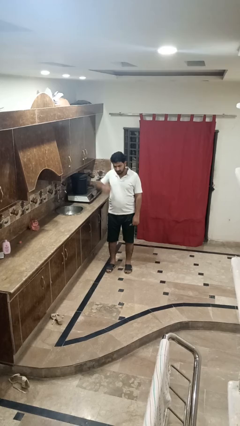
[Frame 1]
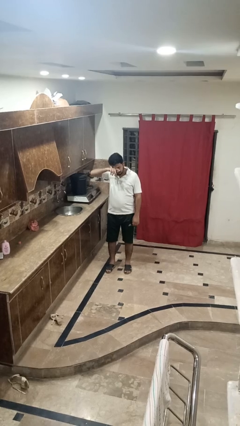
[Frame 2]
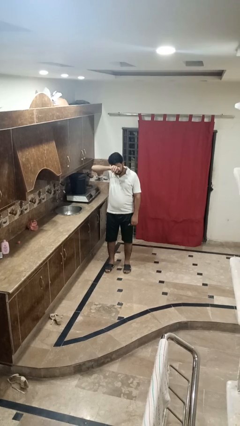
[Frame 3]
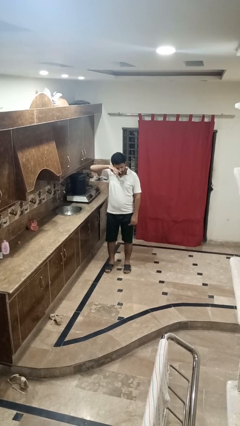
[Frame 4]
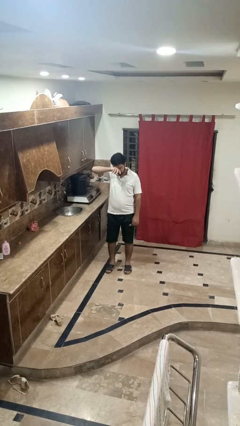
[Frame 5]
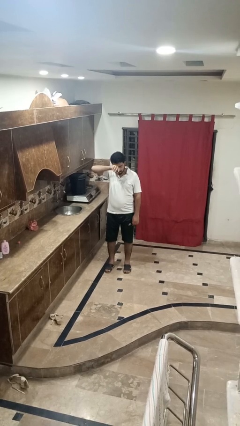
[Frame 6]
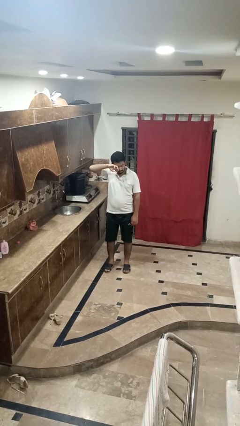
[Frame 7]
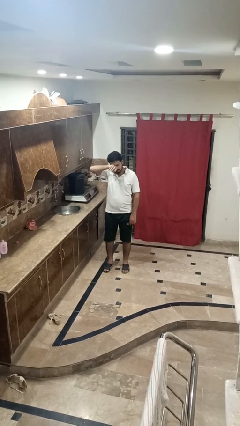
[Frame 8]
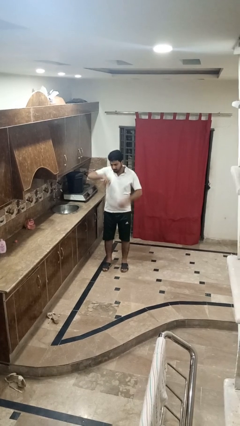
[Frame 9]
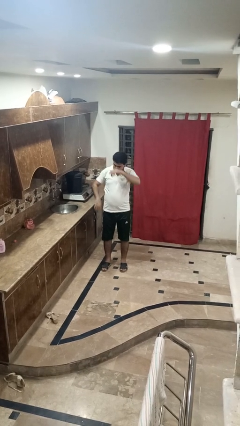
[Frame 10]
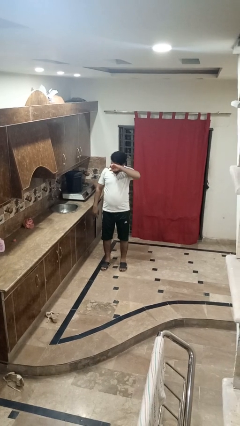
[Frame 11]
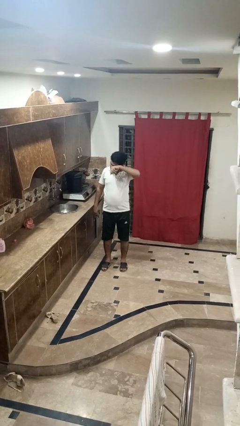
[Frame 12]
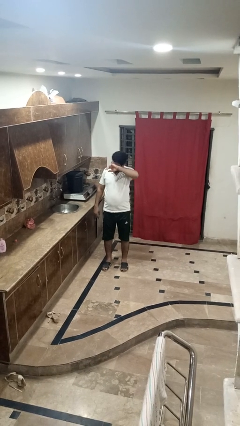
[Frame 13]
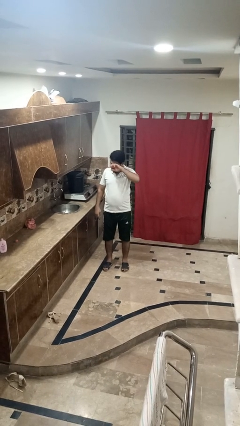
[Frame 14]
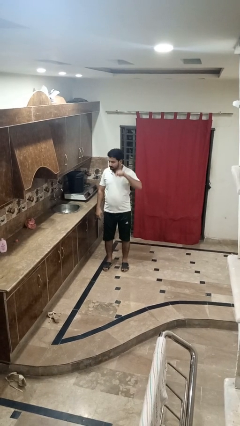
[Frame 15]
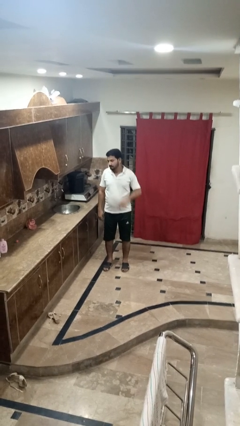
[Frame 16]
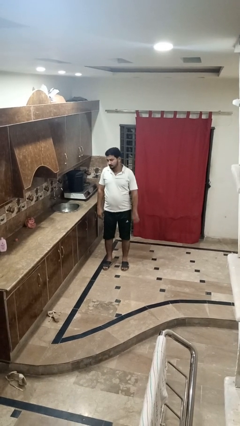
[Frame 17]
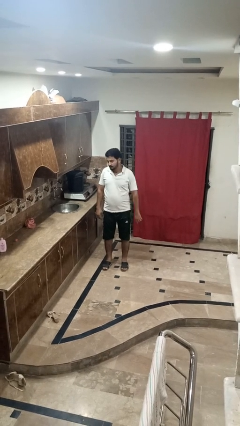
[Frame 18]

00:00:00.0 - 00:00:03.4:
person rubs eyes

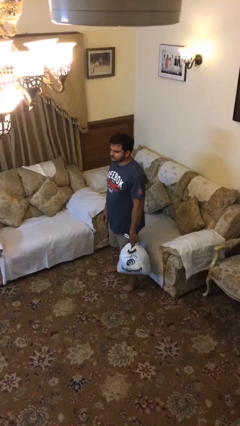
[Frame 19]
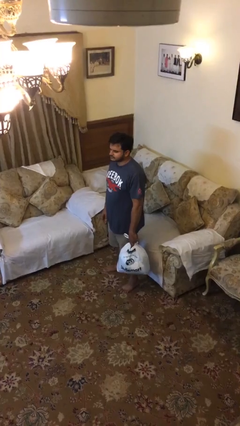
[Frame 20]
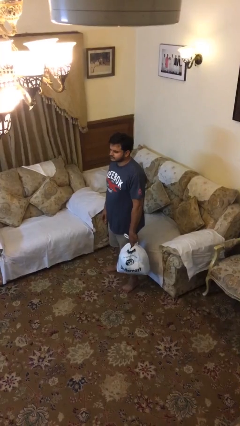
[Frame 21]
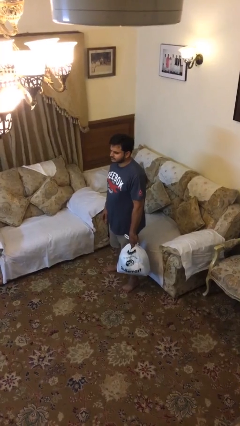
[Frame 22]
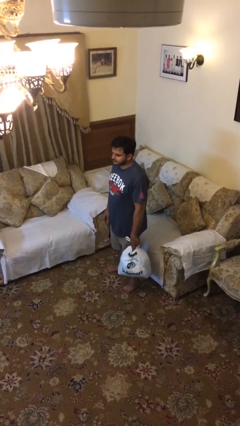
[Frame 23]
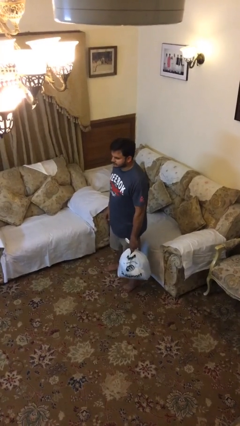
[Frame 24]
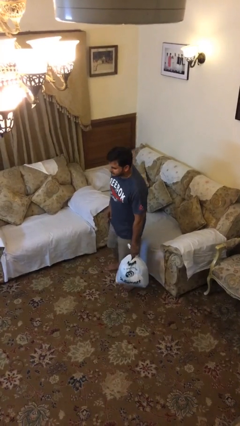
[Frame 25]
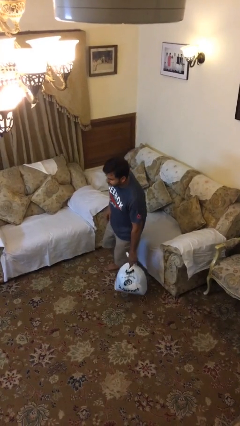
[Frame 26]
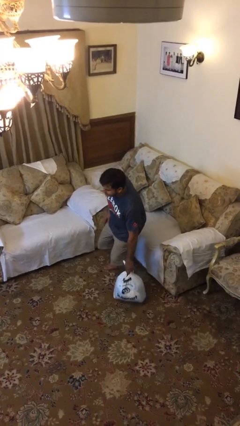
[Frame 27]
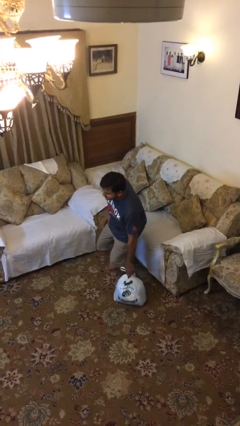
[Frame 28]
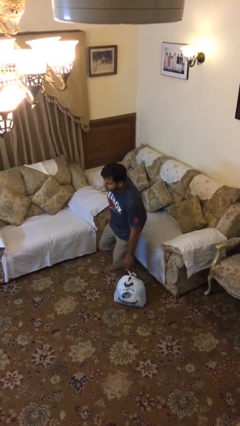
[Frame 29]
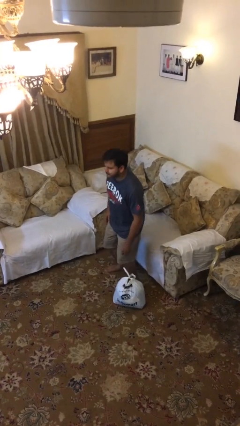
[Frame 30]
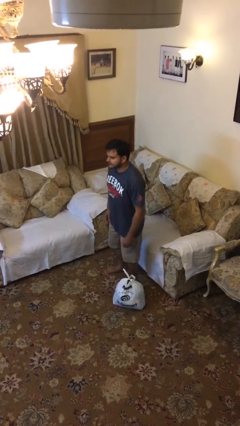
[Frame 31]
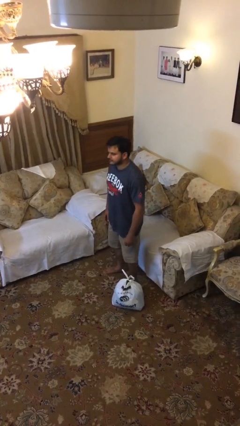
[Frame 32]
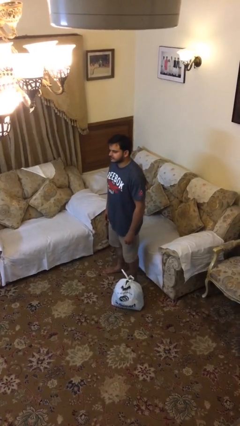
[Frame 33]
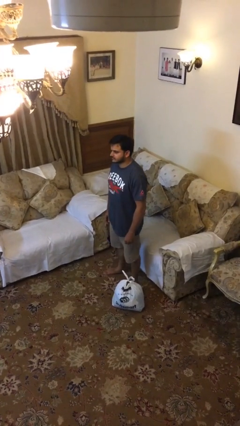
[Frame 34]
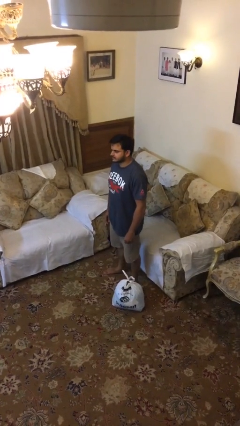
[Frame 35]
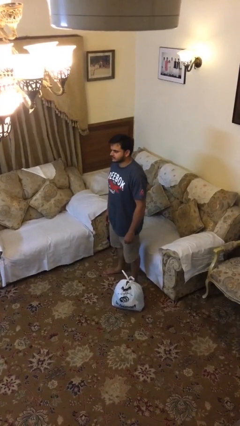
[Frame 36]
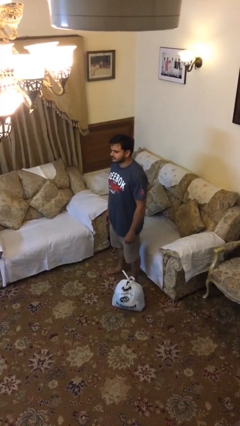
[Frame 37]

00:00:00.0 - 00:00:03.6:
person puts down object on floor

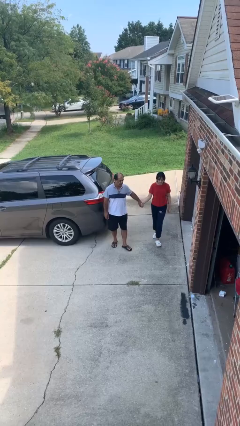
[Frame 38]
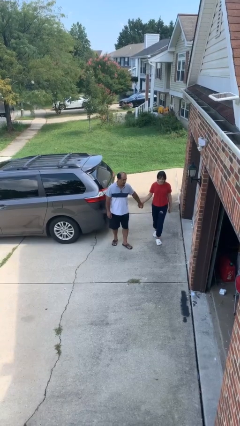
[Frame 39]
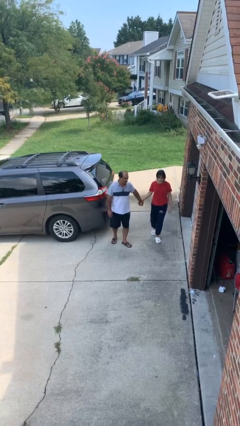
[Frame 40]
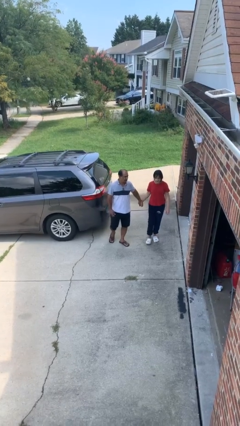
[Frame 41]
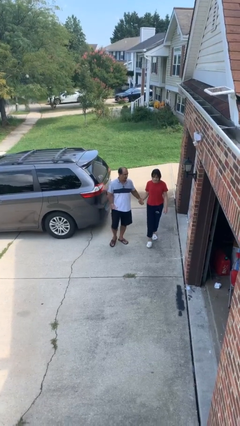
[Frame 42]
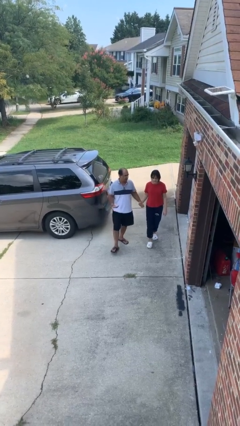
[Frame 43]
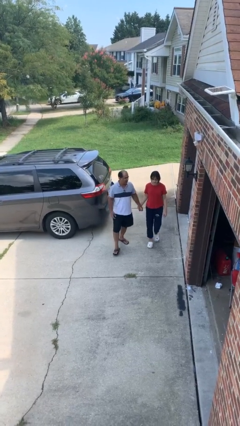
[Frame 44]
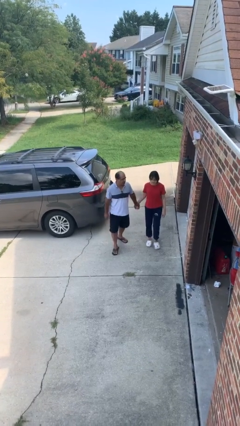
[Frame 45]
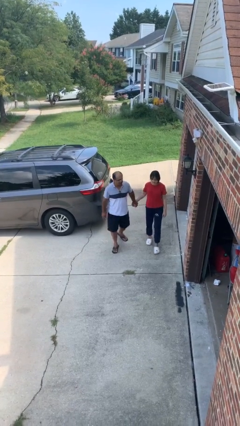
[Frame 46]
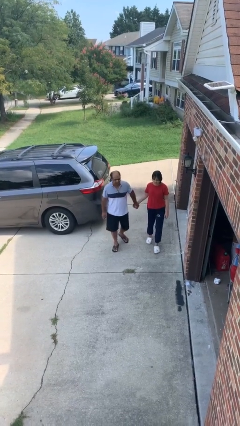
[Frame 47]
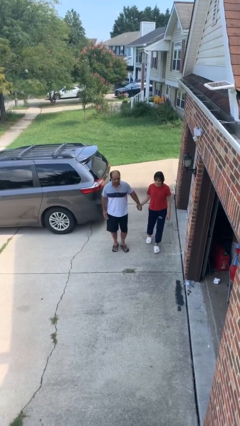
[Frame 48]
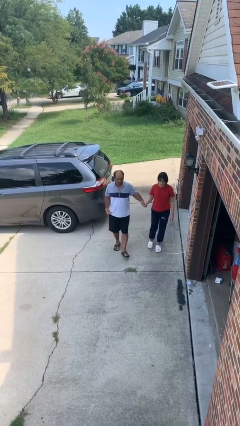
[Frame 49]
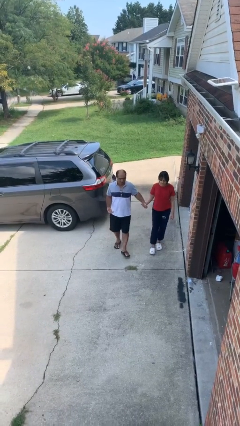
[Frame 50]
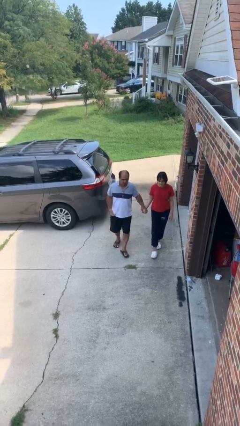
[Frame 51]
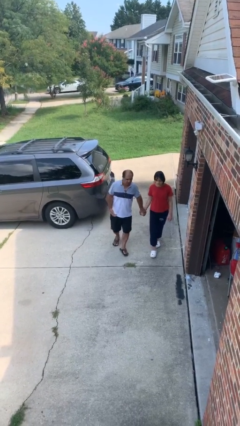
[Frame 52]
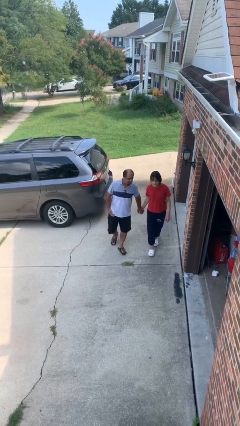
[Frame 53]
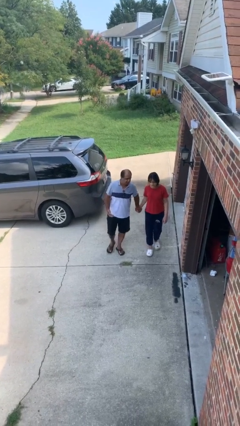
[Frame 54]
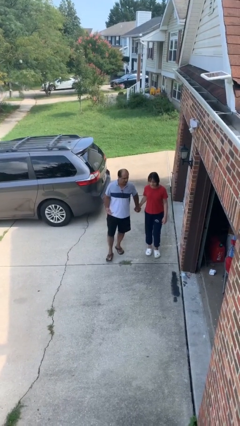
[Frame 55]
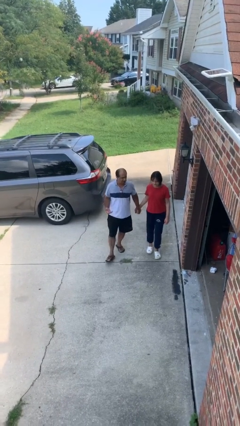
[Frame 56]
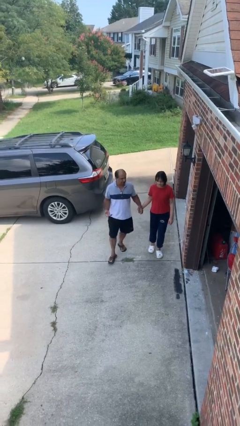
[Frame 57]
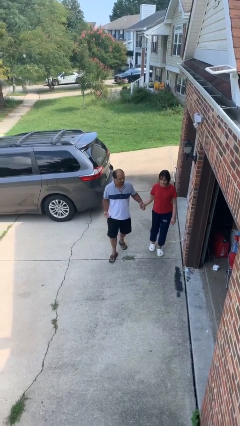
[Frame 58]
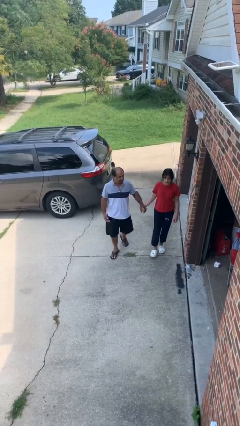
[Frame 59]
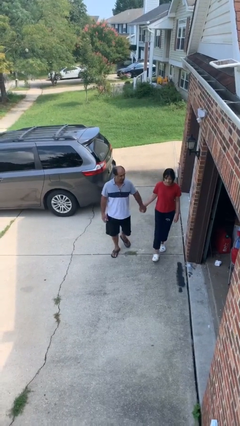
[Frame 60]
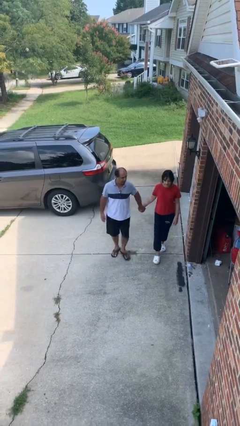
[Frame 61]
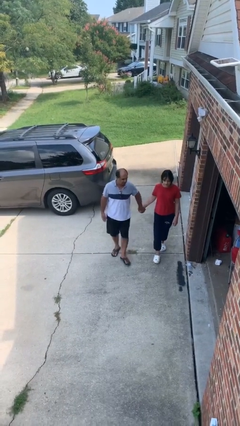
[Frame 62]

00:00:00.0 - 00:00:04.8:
person holds hand

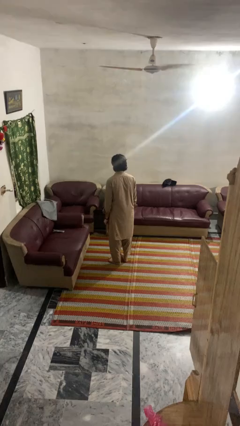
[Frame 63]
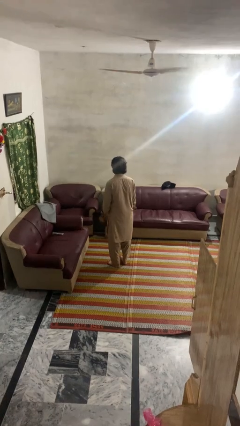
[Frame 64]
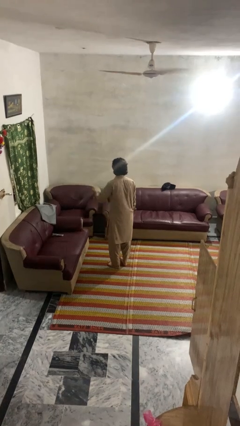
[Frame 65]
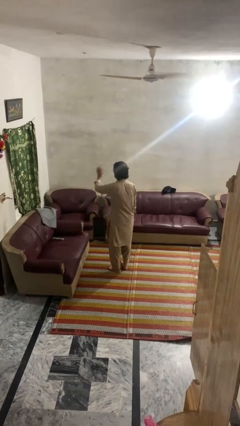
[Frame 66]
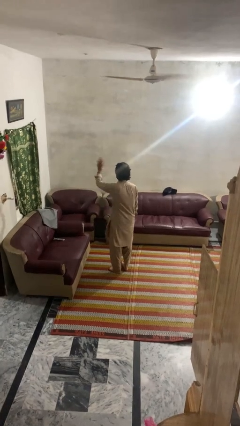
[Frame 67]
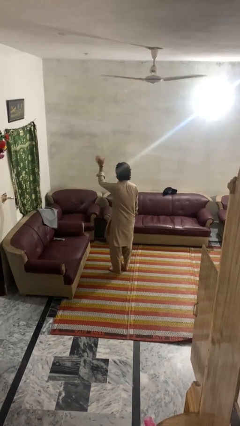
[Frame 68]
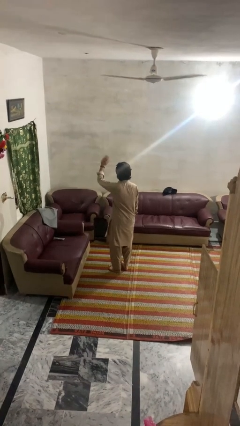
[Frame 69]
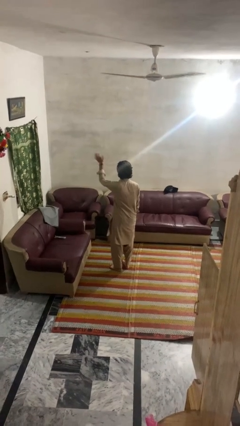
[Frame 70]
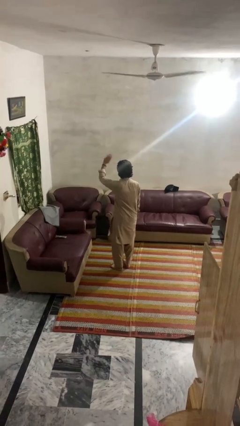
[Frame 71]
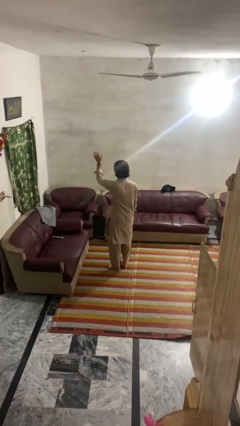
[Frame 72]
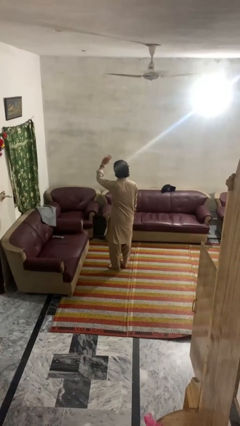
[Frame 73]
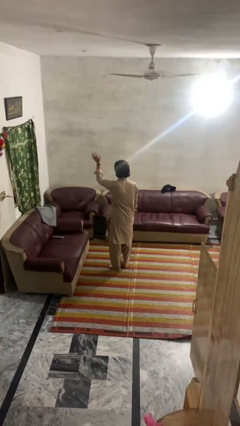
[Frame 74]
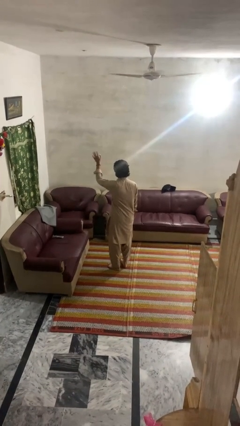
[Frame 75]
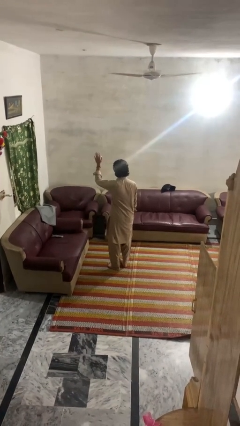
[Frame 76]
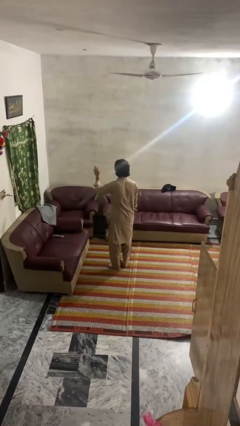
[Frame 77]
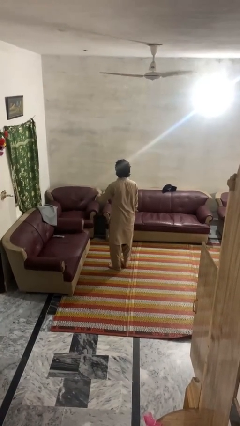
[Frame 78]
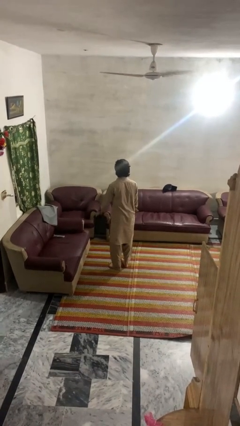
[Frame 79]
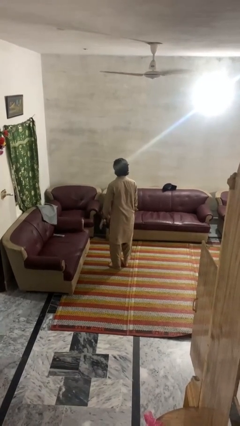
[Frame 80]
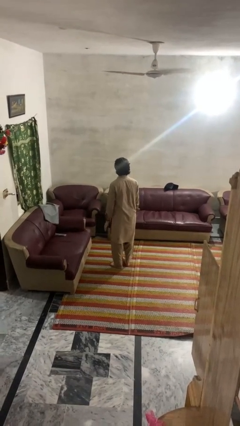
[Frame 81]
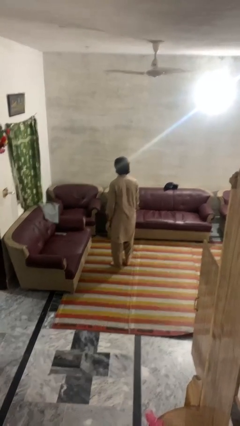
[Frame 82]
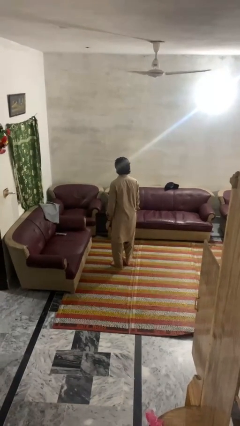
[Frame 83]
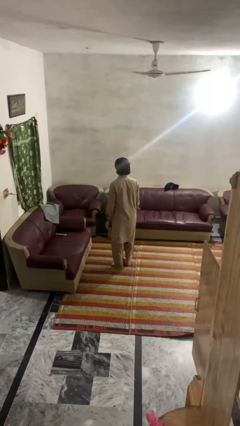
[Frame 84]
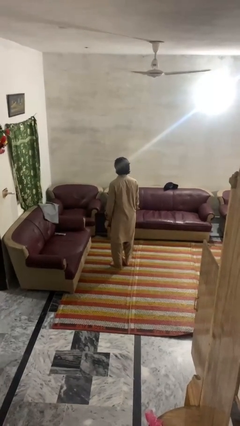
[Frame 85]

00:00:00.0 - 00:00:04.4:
person waves at person

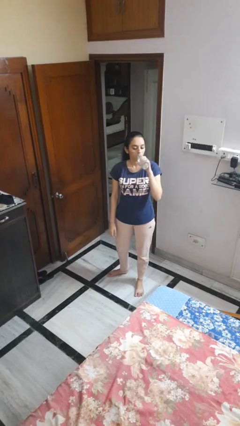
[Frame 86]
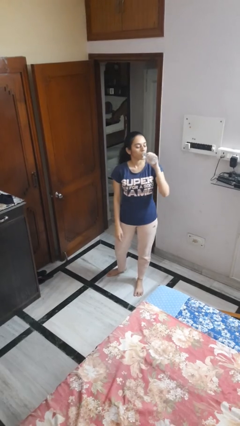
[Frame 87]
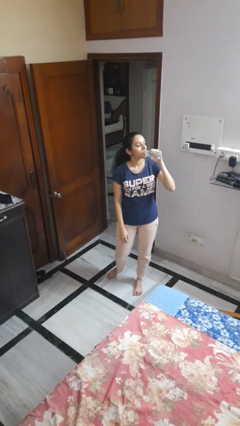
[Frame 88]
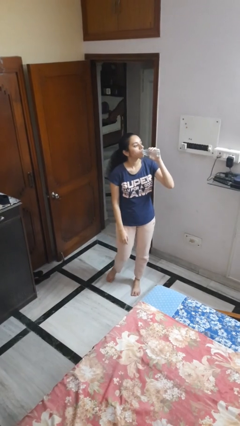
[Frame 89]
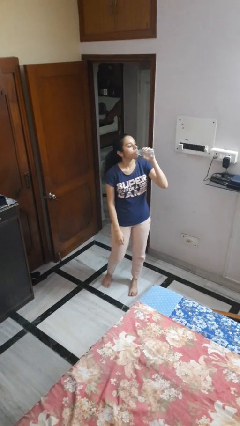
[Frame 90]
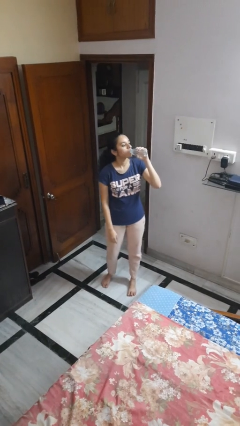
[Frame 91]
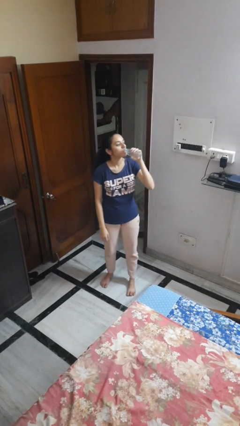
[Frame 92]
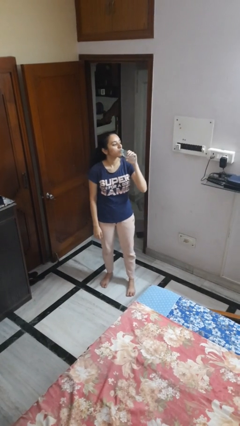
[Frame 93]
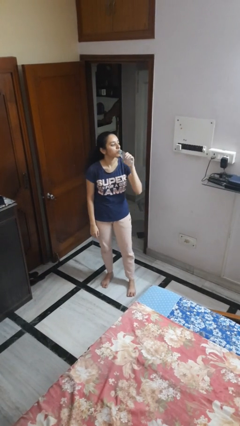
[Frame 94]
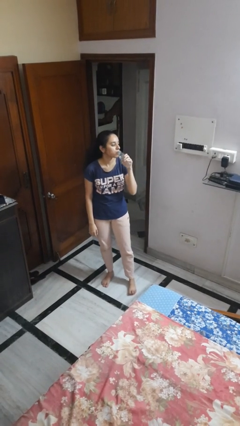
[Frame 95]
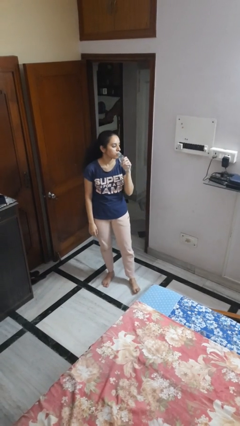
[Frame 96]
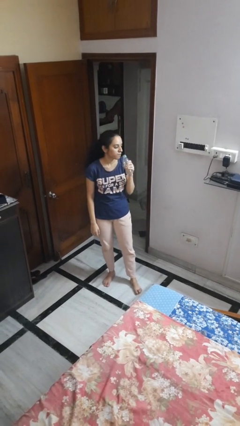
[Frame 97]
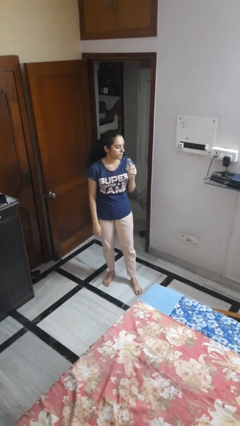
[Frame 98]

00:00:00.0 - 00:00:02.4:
person drinks from bottle
